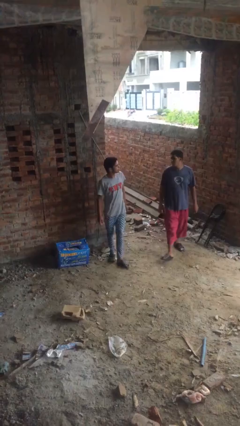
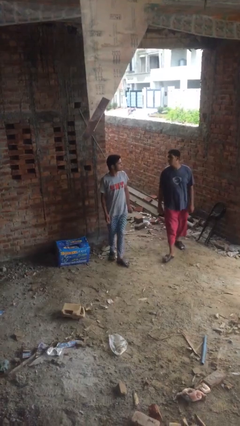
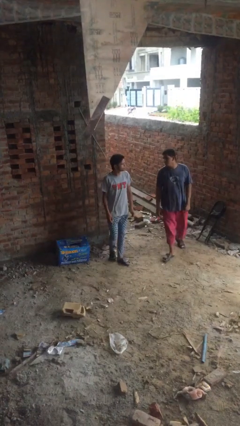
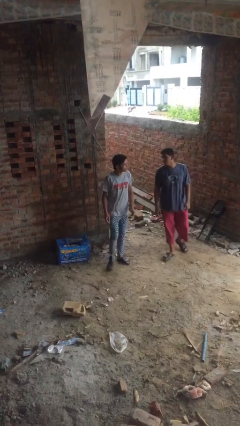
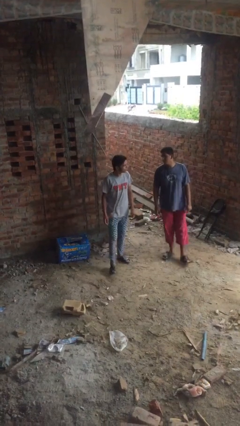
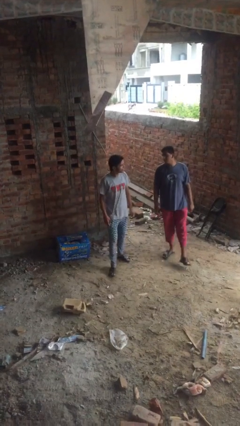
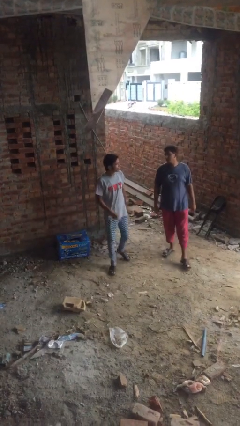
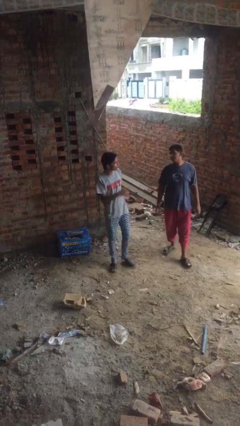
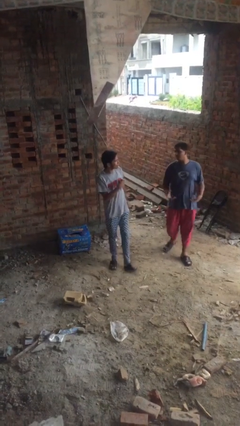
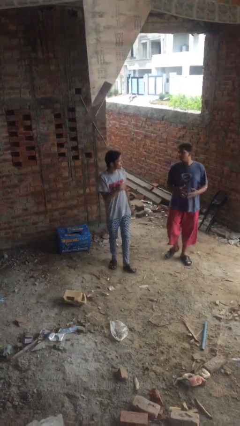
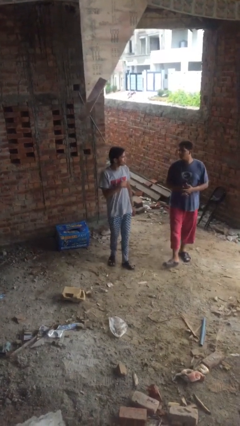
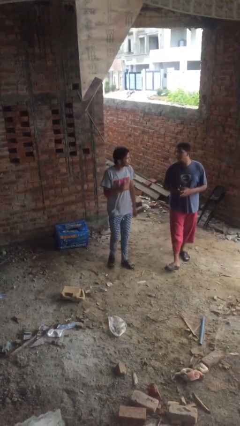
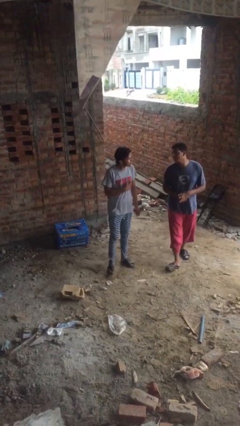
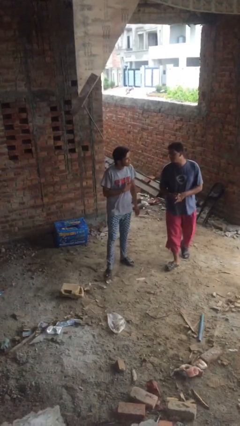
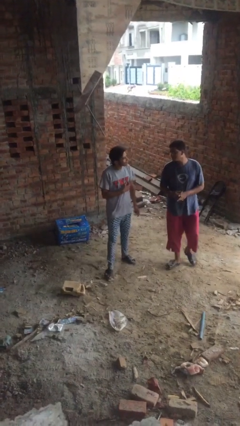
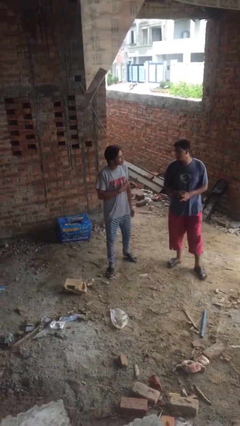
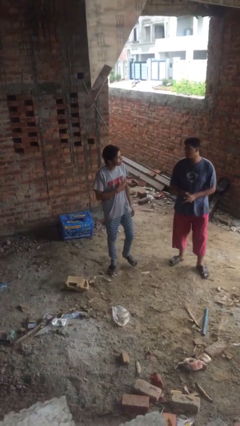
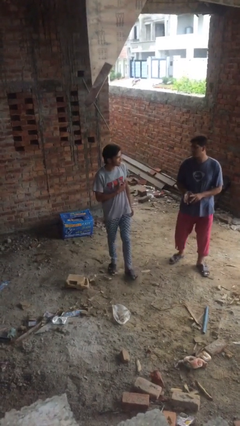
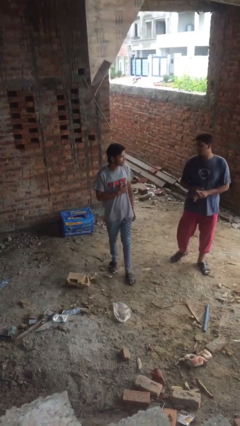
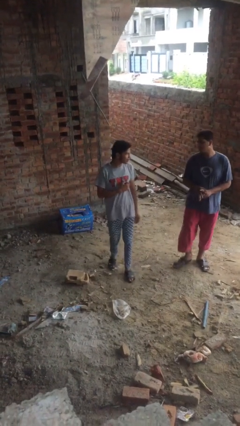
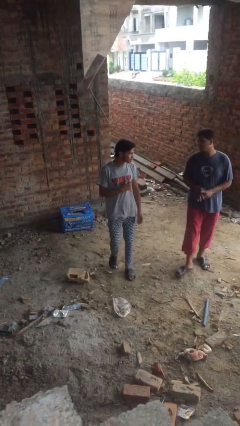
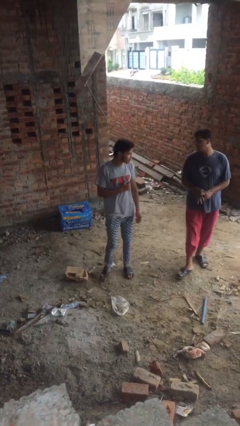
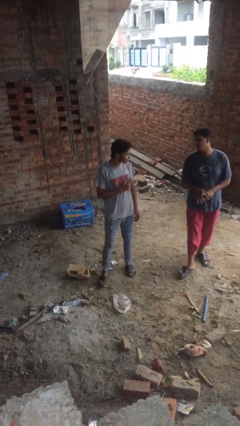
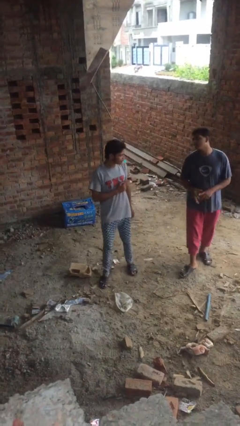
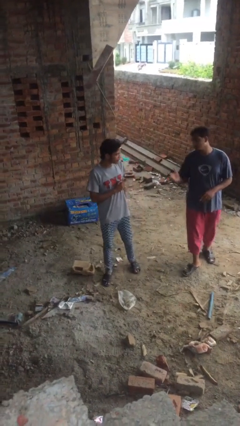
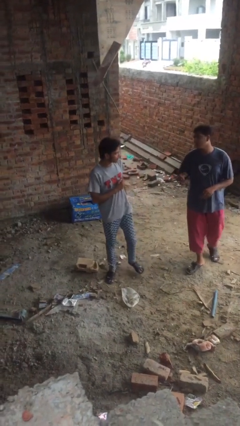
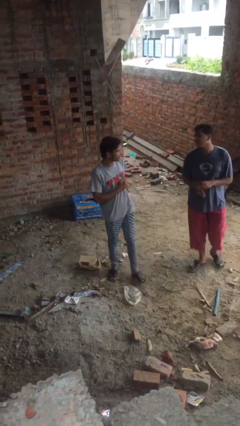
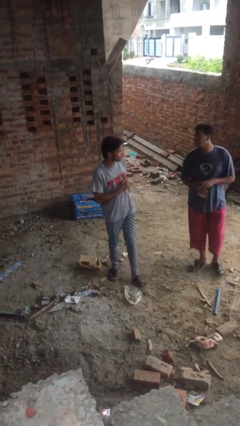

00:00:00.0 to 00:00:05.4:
person talks to person

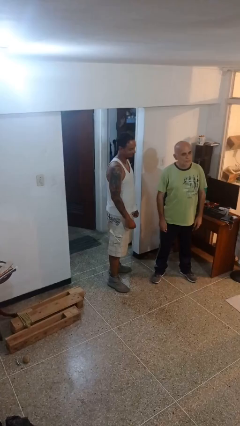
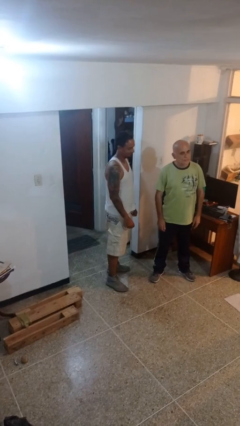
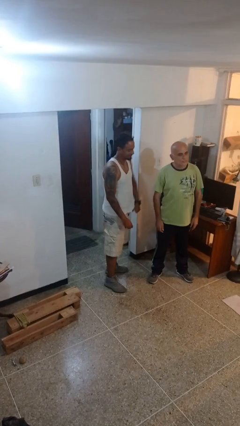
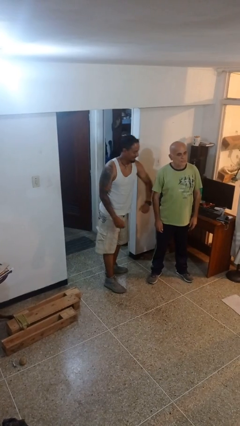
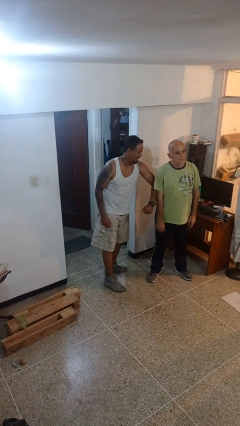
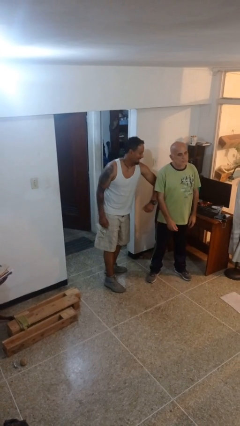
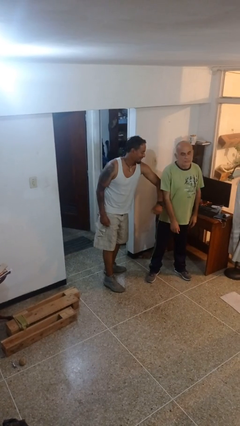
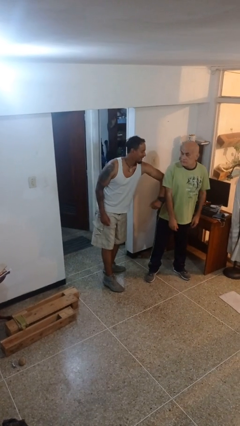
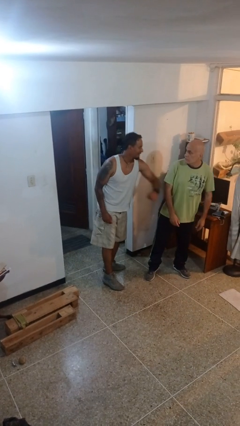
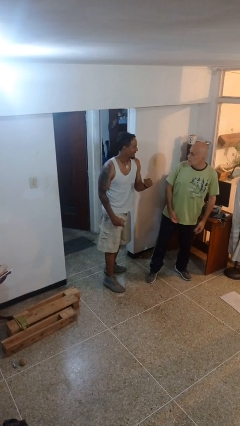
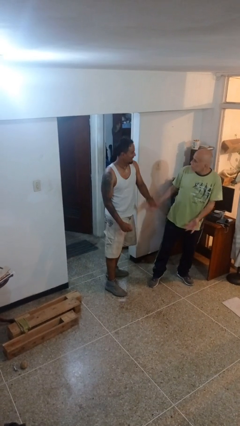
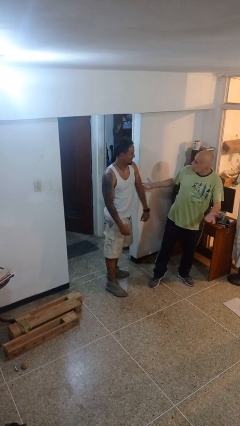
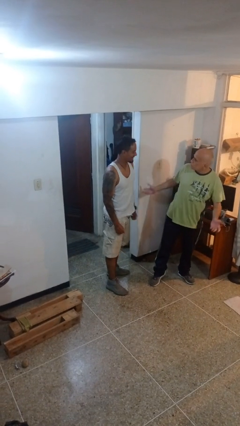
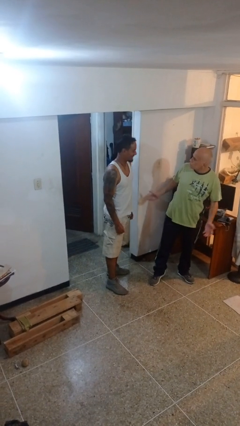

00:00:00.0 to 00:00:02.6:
person nudges person with elbow

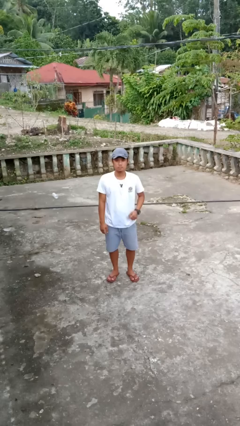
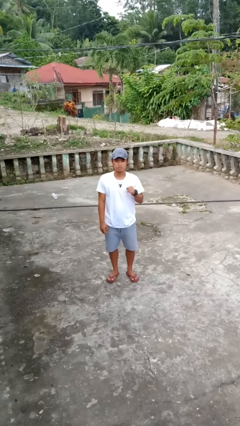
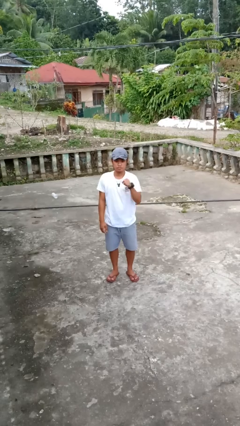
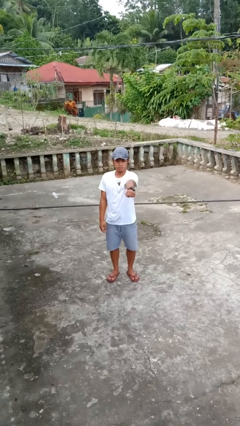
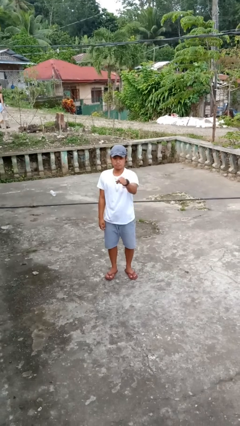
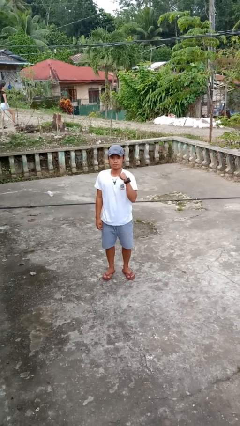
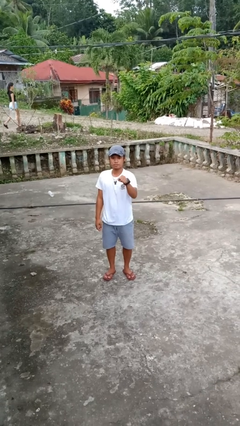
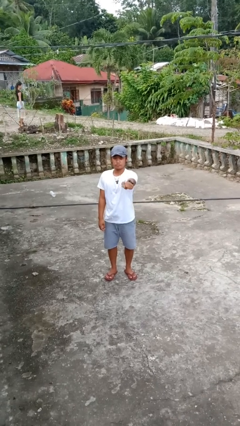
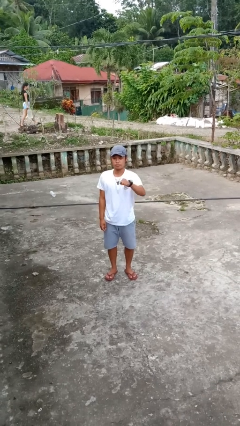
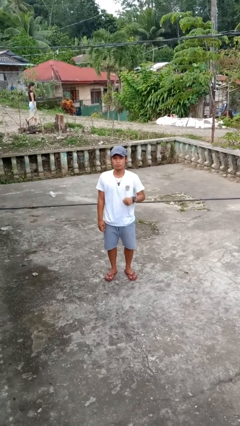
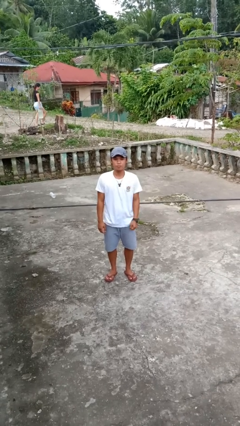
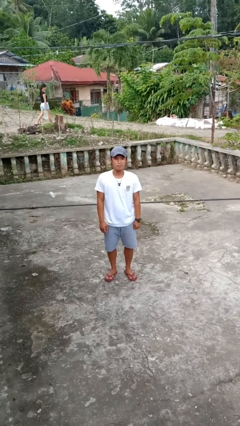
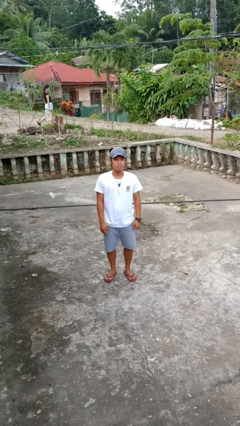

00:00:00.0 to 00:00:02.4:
person punches

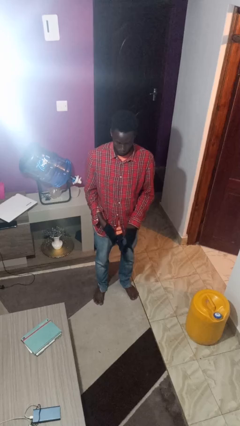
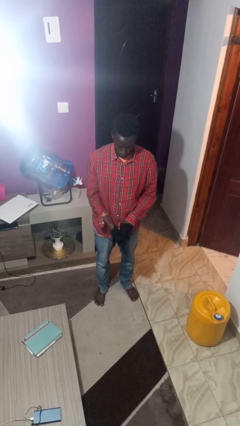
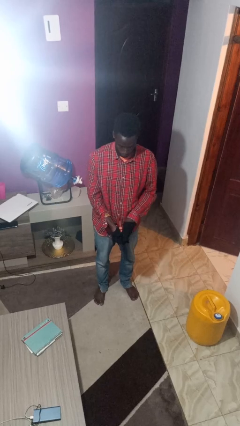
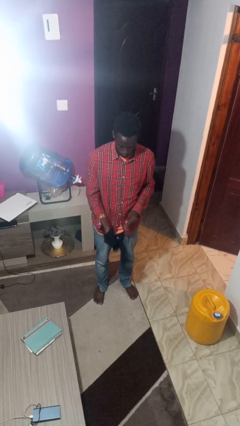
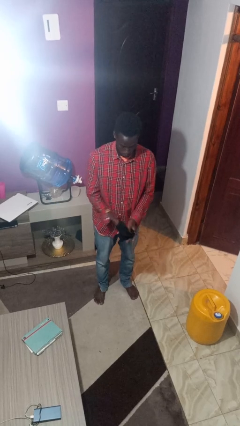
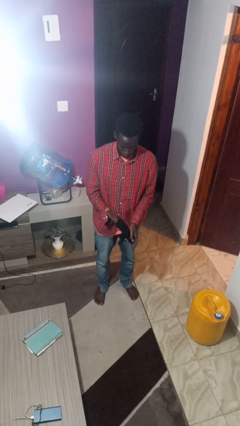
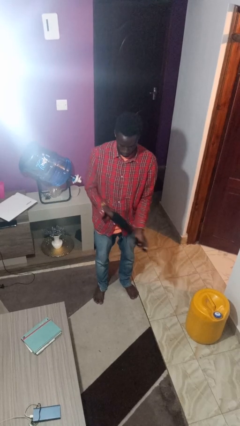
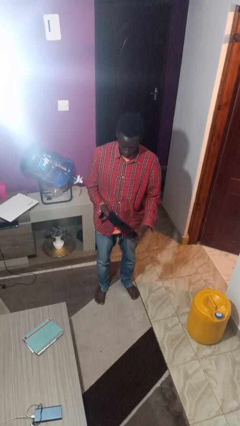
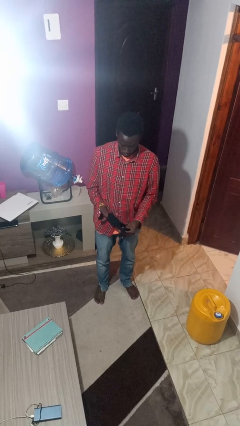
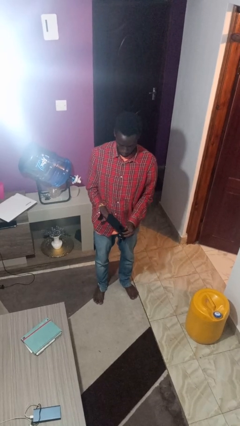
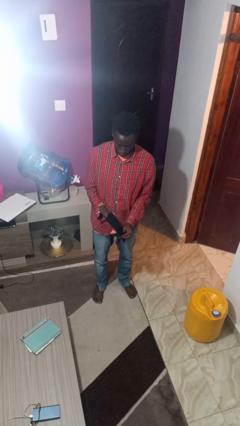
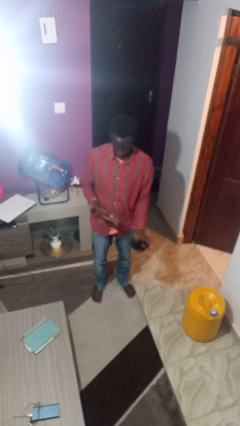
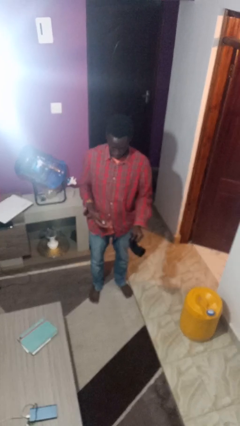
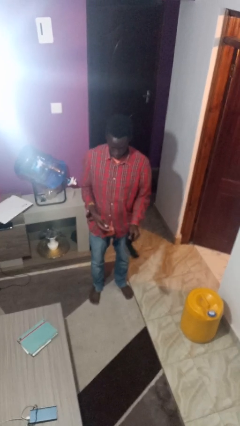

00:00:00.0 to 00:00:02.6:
person takes off gloves

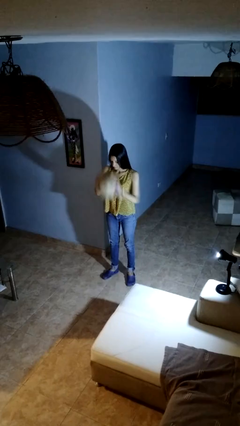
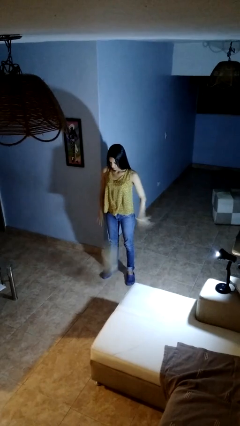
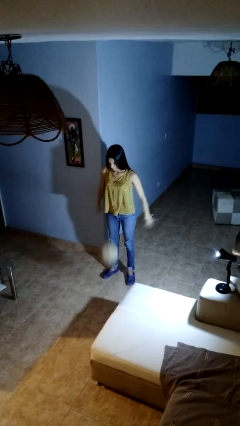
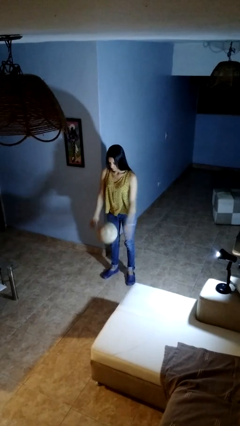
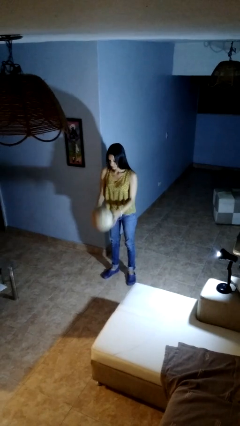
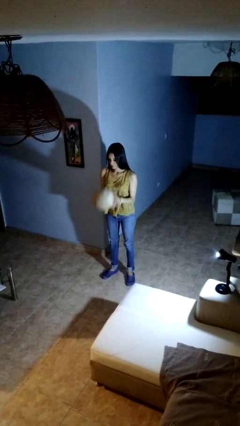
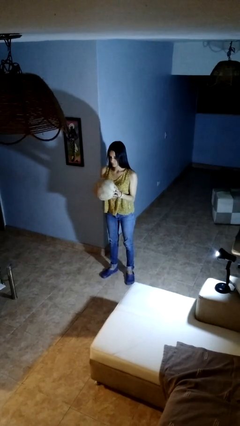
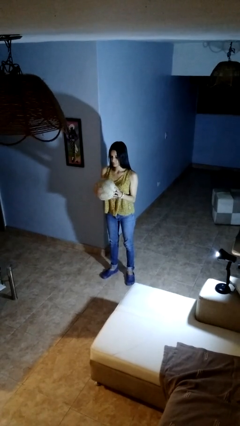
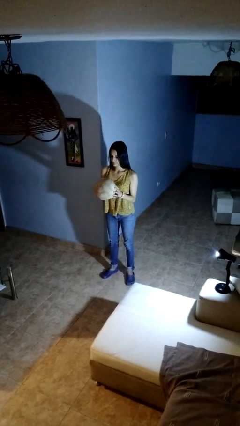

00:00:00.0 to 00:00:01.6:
person bounces ball on floor

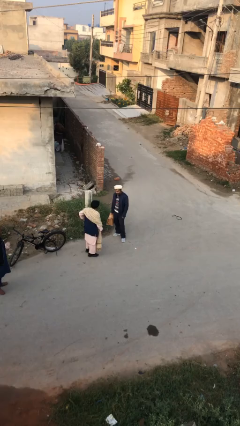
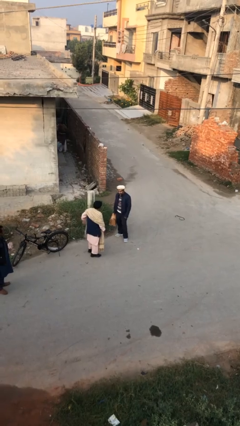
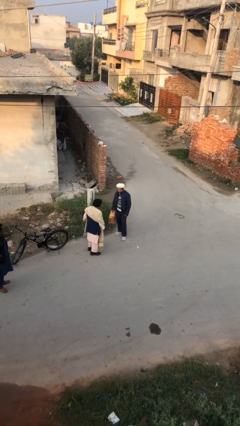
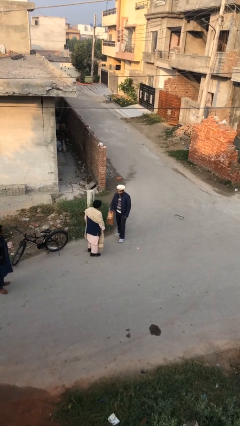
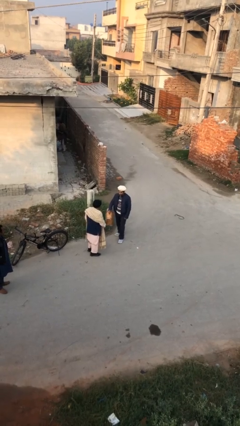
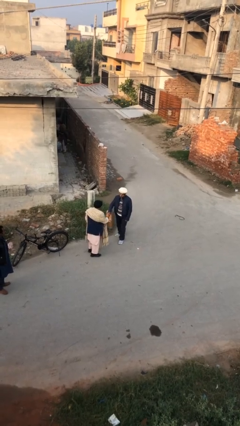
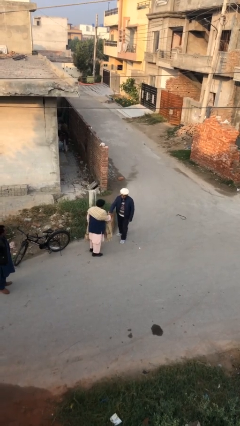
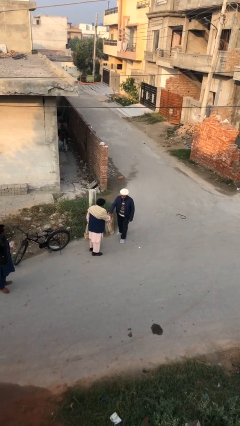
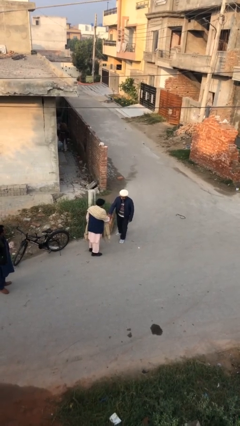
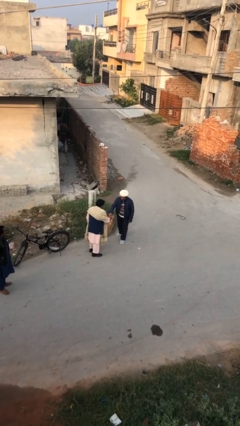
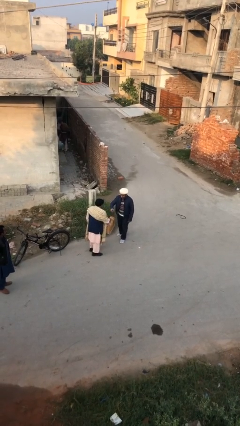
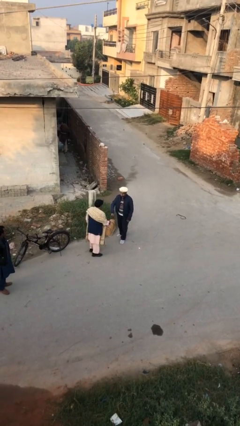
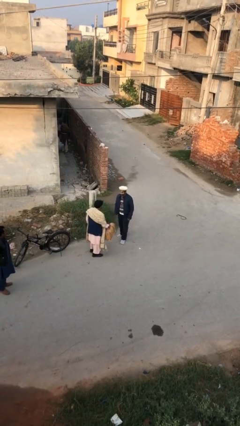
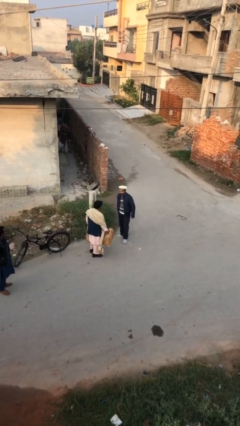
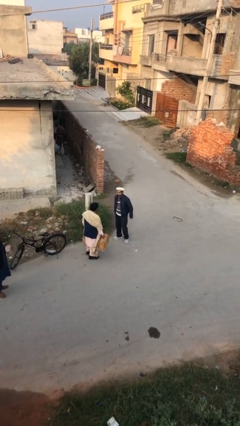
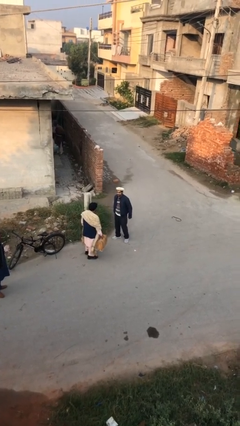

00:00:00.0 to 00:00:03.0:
person transfers object to person
